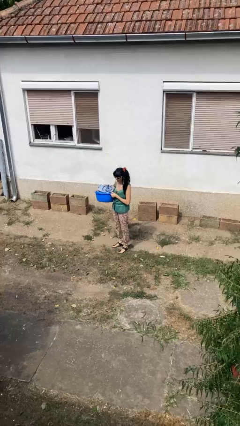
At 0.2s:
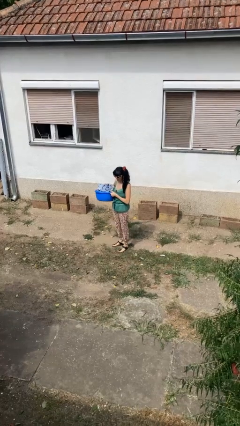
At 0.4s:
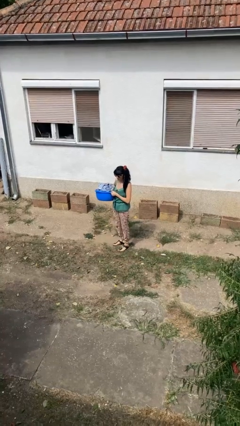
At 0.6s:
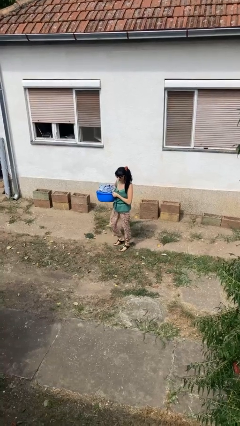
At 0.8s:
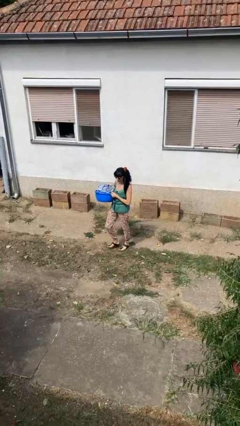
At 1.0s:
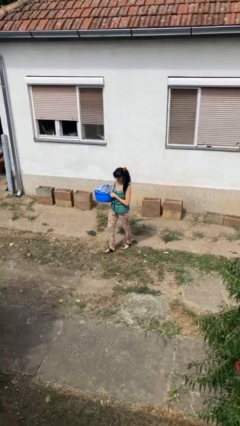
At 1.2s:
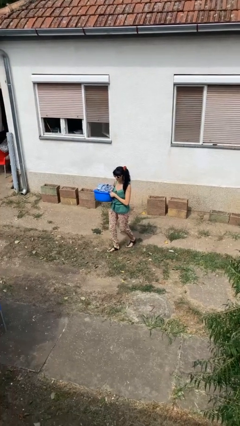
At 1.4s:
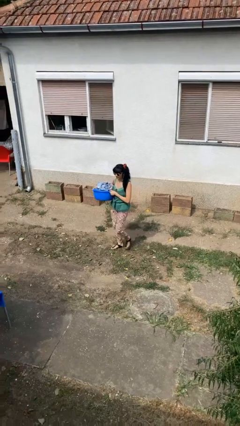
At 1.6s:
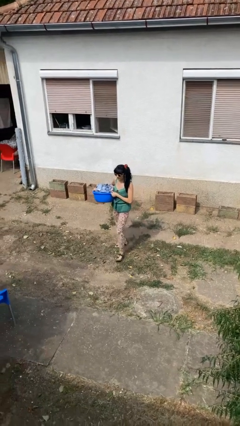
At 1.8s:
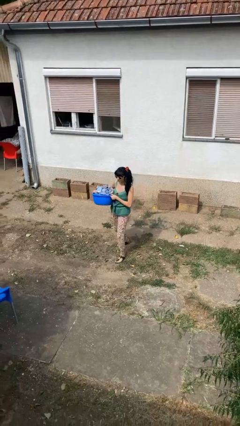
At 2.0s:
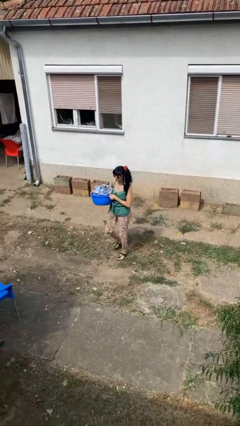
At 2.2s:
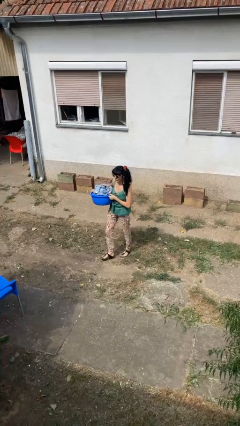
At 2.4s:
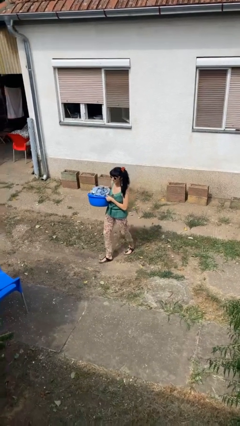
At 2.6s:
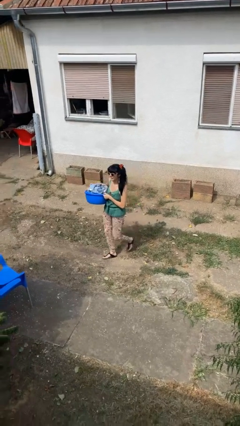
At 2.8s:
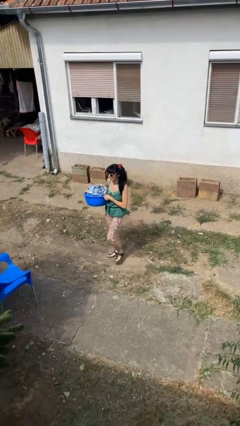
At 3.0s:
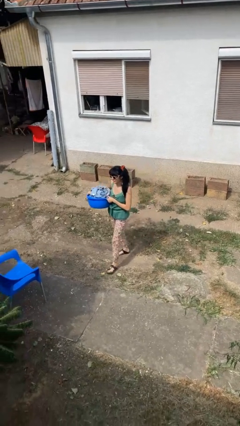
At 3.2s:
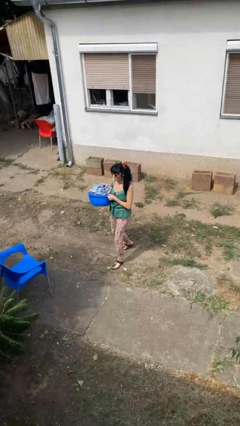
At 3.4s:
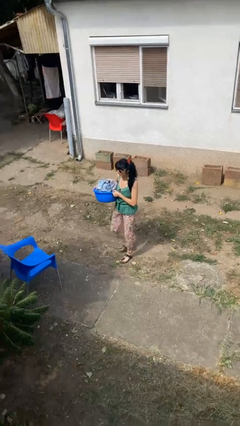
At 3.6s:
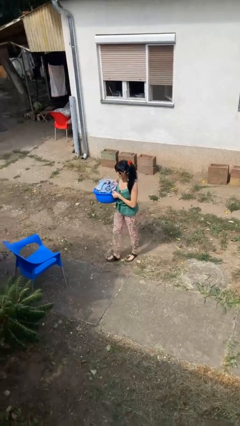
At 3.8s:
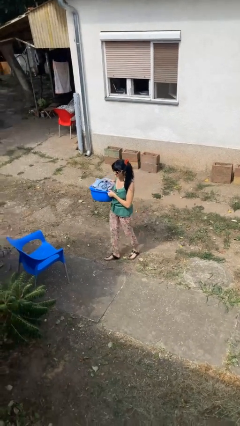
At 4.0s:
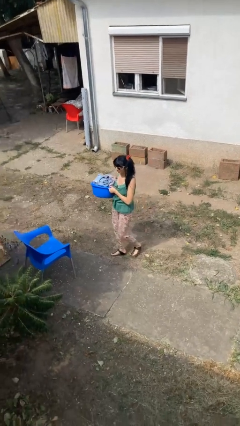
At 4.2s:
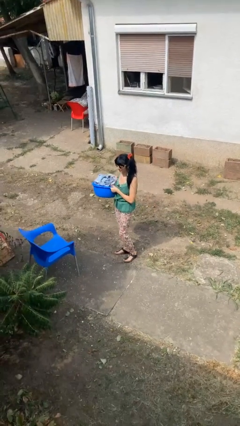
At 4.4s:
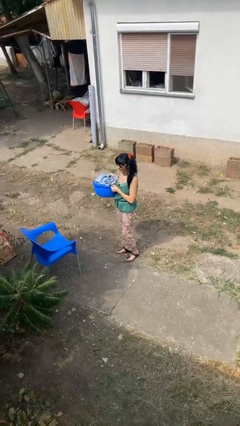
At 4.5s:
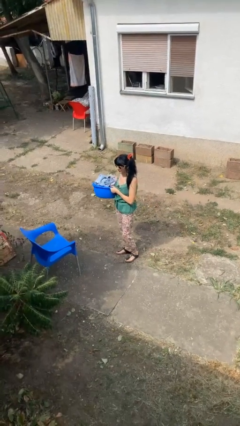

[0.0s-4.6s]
person carries laundry basket

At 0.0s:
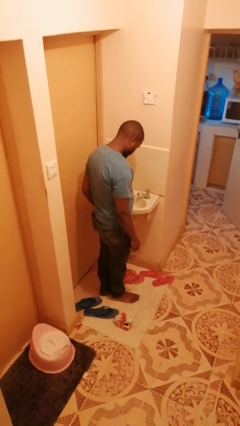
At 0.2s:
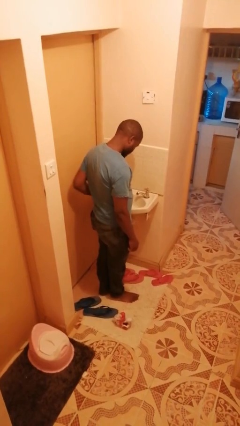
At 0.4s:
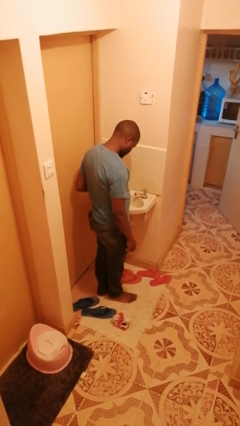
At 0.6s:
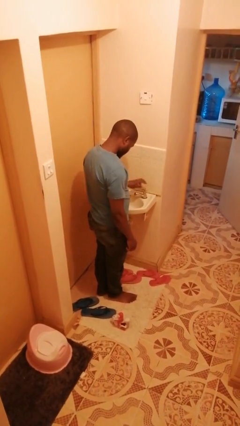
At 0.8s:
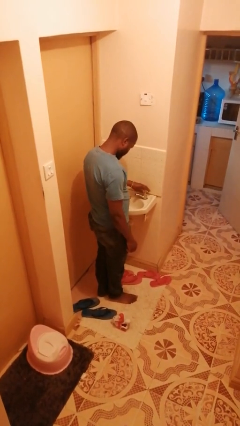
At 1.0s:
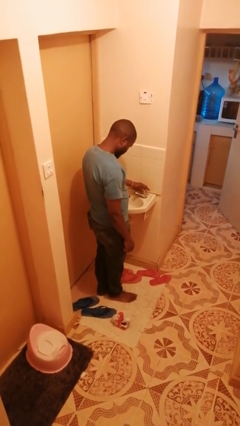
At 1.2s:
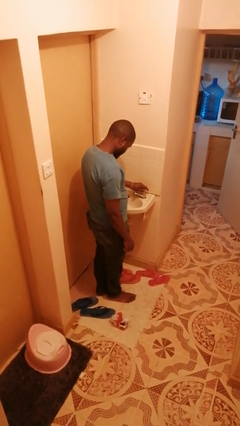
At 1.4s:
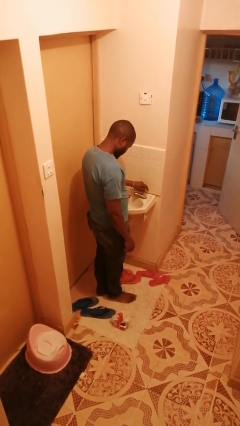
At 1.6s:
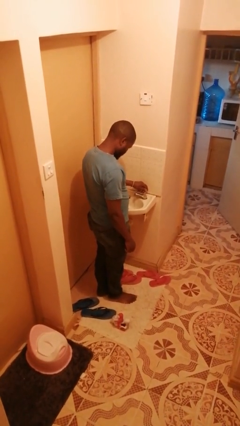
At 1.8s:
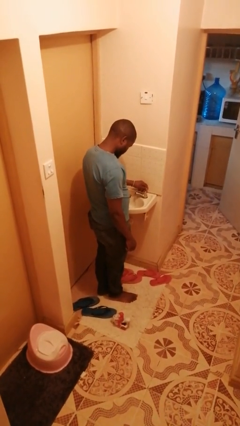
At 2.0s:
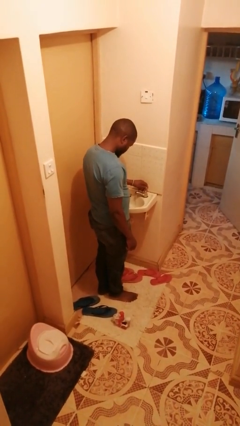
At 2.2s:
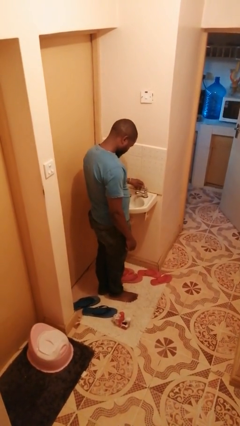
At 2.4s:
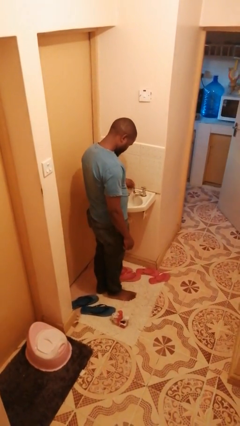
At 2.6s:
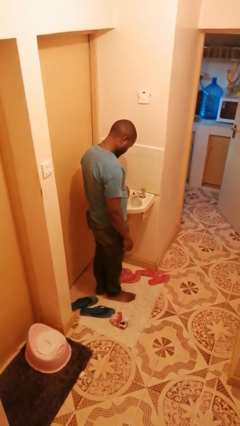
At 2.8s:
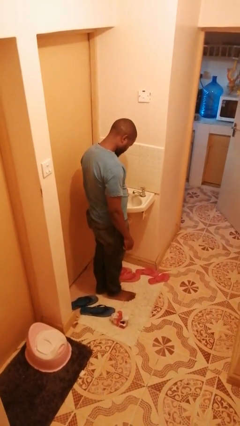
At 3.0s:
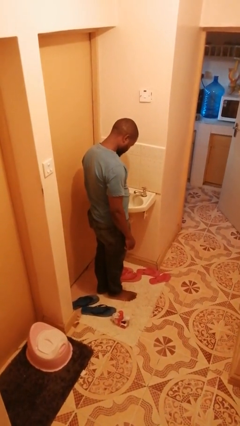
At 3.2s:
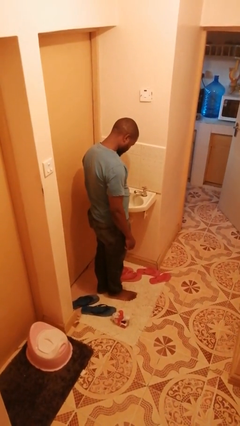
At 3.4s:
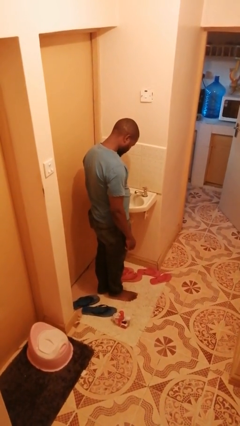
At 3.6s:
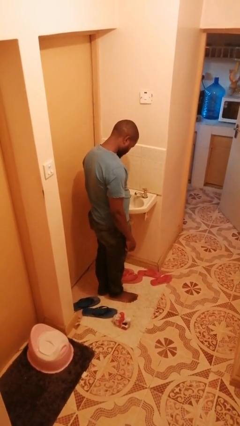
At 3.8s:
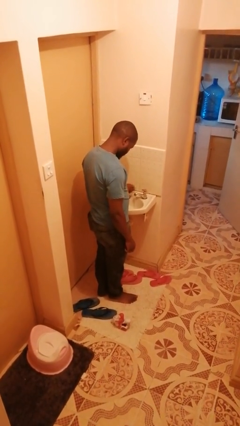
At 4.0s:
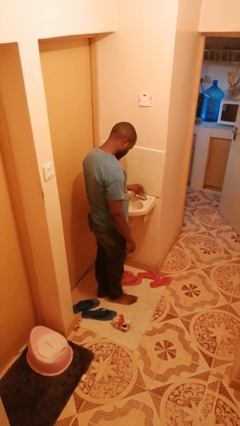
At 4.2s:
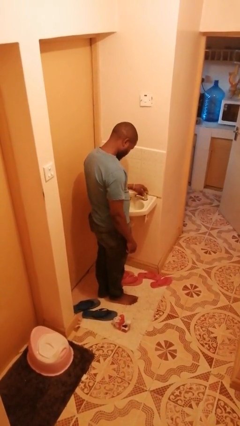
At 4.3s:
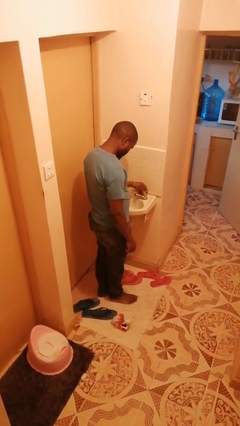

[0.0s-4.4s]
person turns on faucet

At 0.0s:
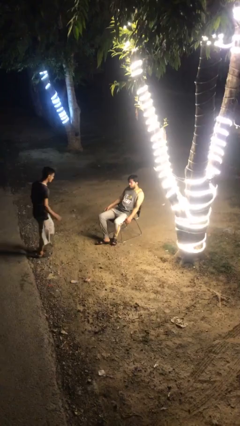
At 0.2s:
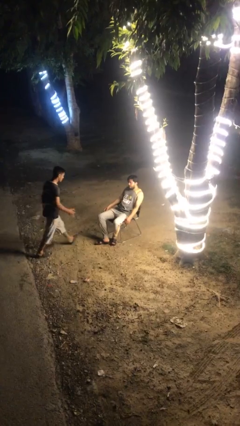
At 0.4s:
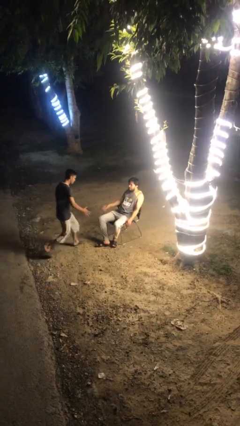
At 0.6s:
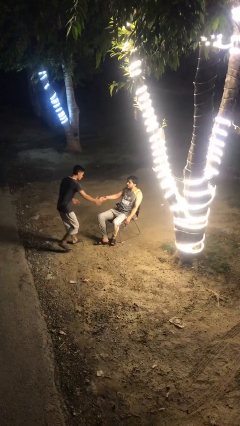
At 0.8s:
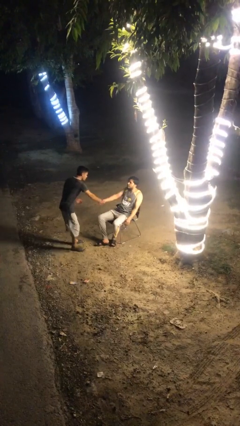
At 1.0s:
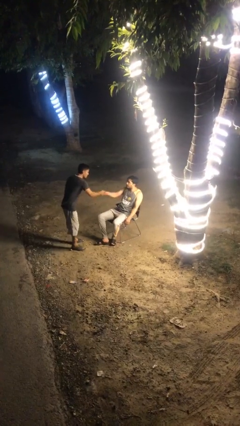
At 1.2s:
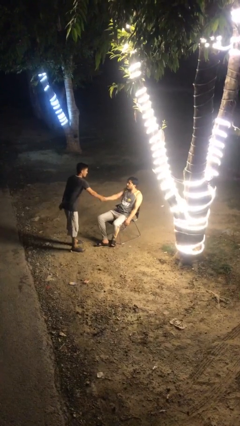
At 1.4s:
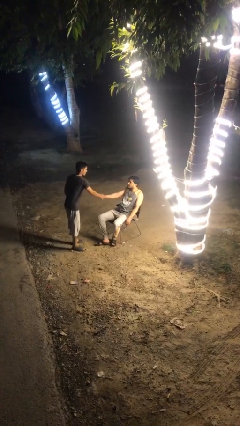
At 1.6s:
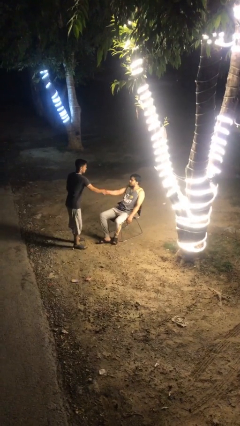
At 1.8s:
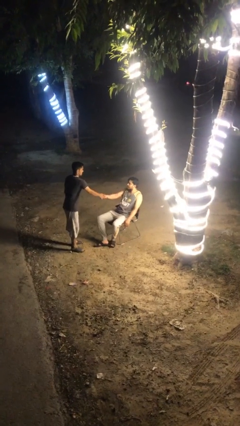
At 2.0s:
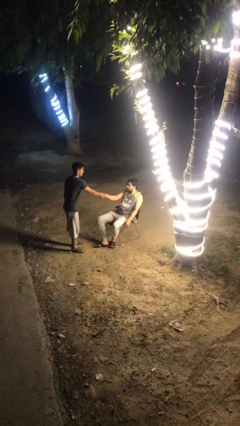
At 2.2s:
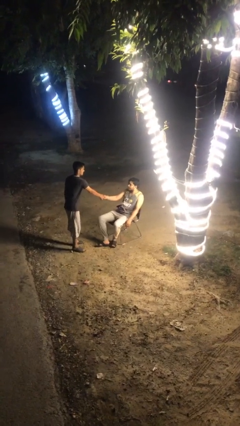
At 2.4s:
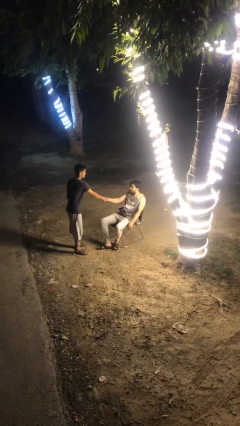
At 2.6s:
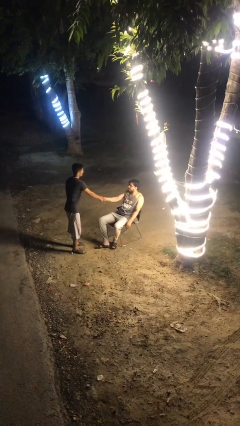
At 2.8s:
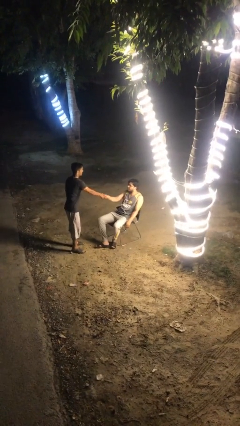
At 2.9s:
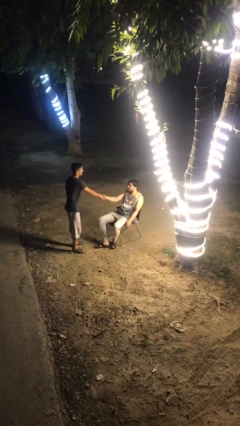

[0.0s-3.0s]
person shakes hand

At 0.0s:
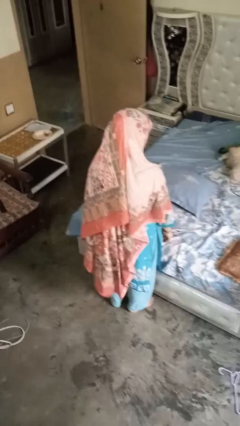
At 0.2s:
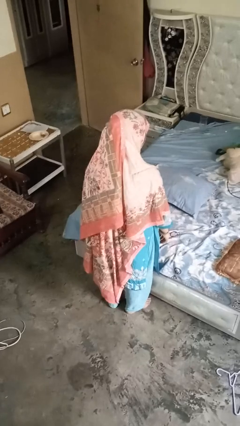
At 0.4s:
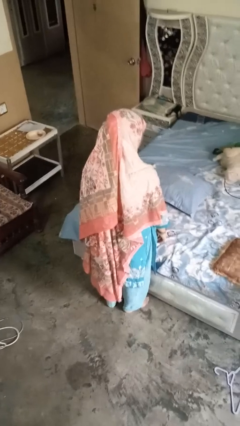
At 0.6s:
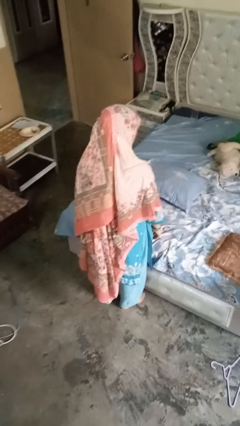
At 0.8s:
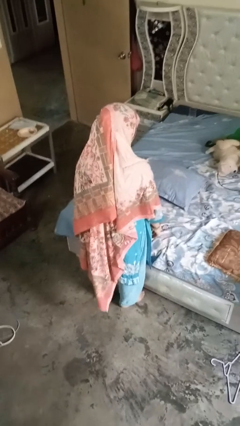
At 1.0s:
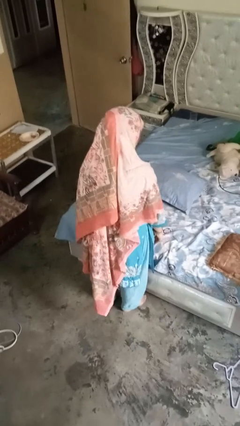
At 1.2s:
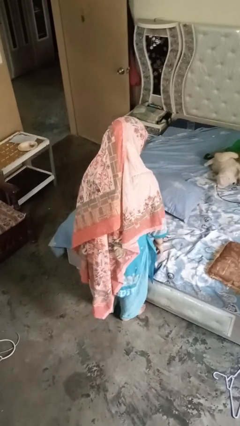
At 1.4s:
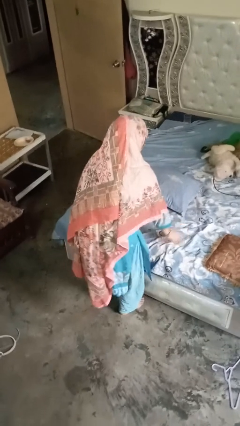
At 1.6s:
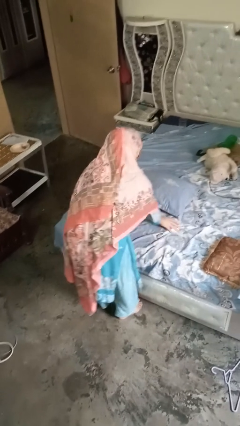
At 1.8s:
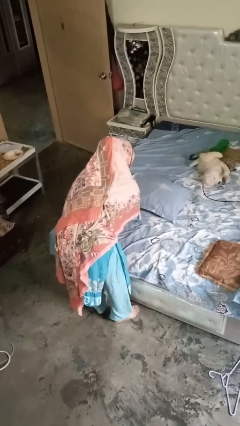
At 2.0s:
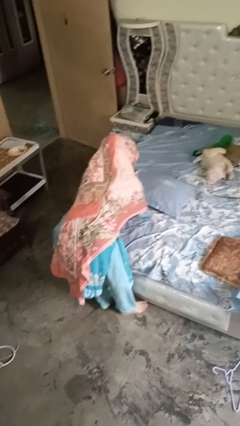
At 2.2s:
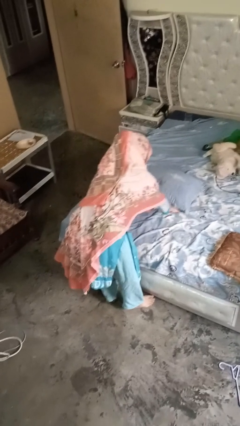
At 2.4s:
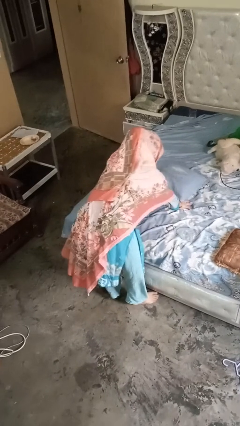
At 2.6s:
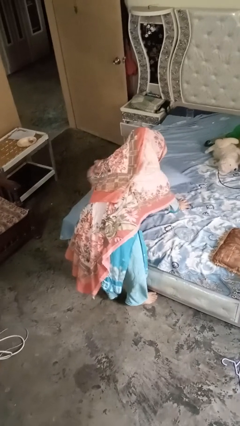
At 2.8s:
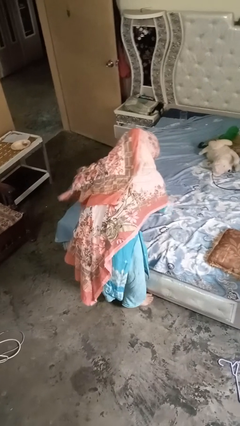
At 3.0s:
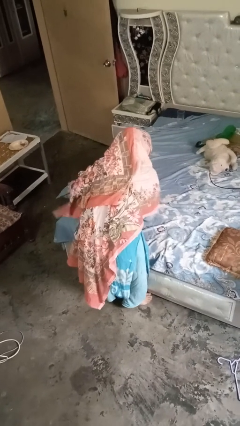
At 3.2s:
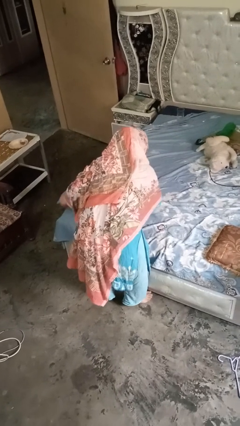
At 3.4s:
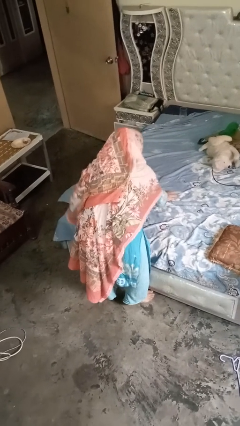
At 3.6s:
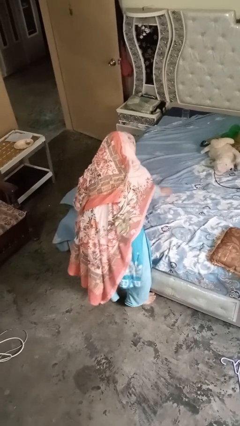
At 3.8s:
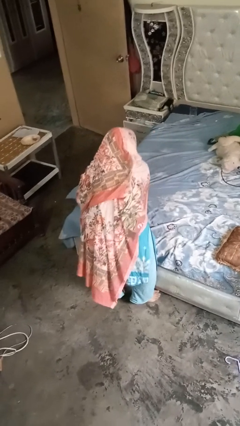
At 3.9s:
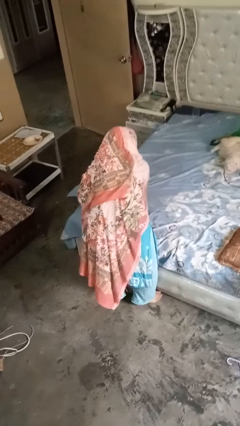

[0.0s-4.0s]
person searches under bed

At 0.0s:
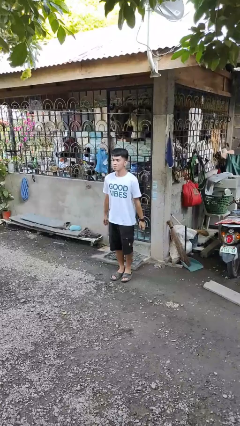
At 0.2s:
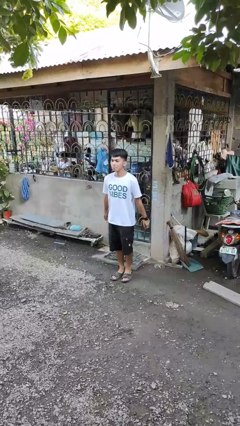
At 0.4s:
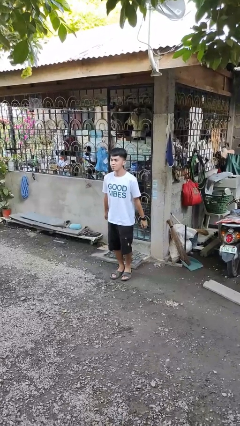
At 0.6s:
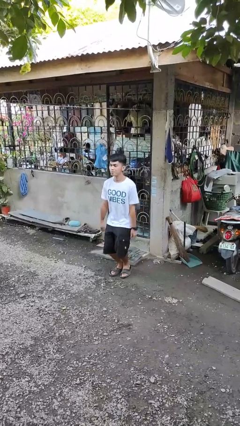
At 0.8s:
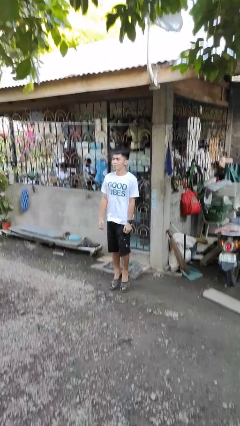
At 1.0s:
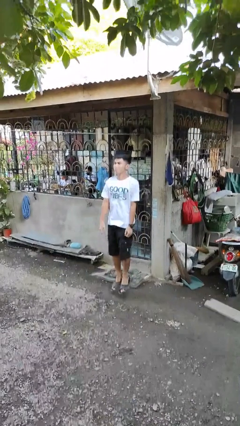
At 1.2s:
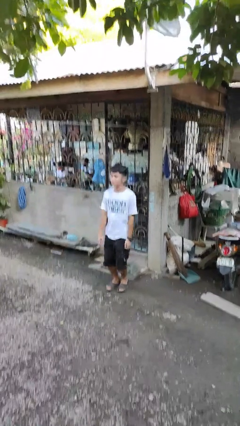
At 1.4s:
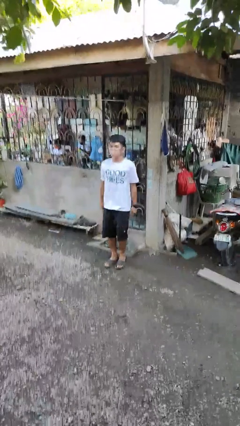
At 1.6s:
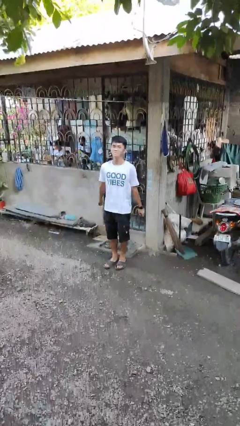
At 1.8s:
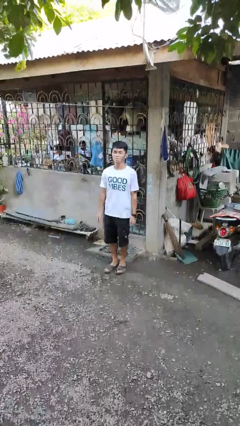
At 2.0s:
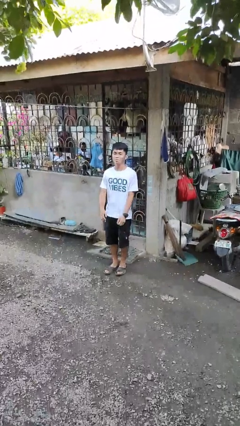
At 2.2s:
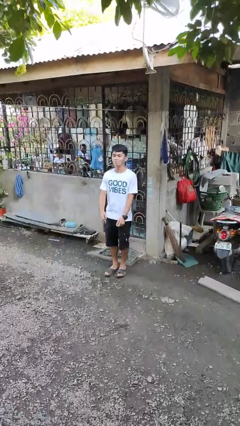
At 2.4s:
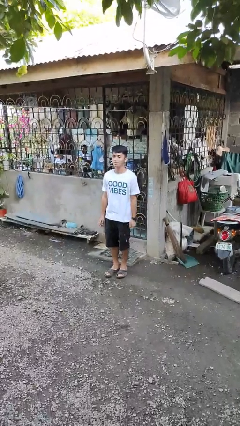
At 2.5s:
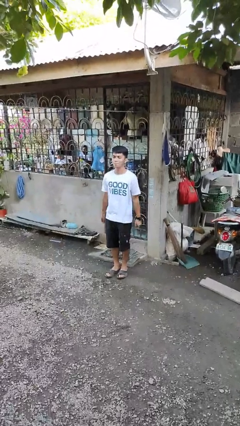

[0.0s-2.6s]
person jumps
